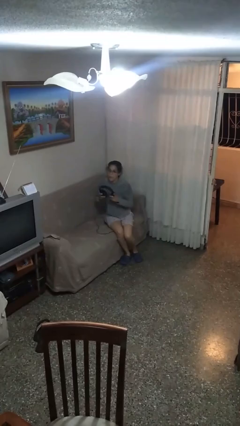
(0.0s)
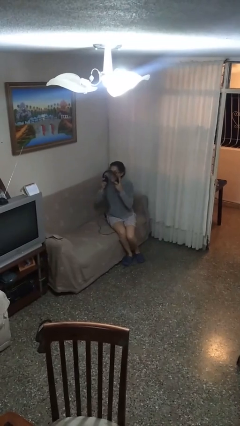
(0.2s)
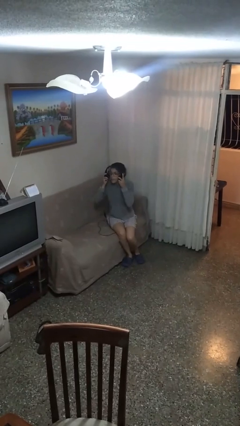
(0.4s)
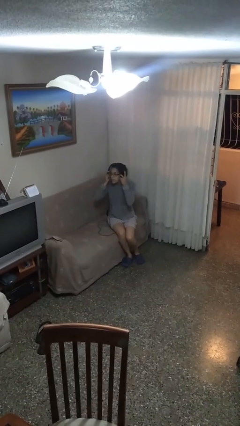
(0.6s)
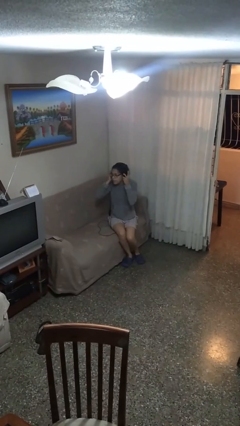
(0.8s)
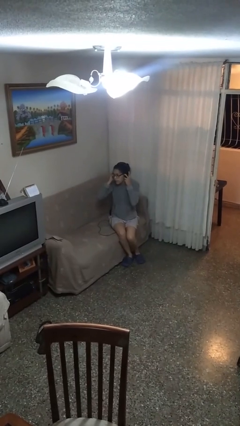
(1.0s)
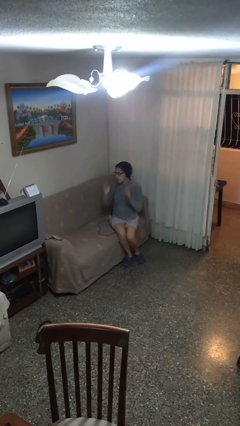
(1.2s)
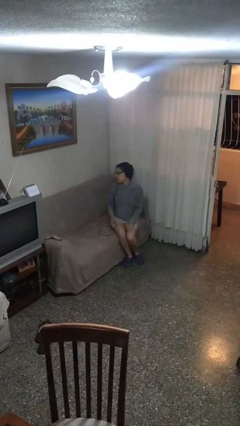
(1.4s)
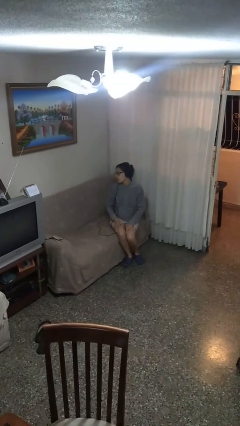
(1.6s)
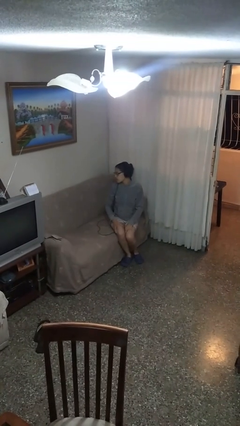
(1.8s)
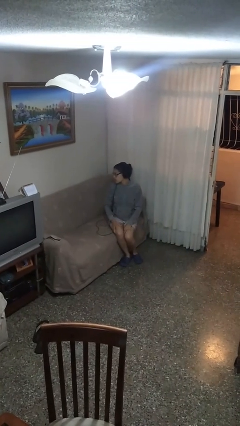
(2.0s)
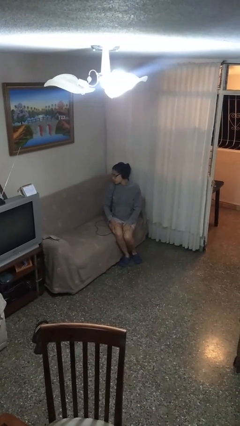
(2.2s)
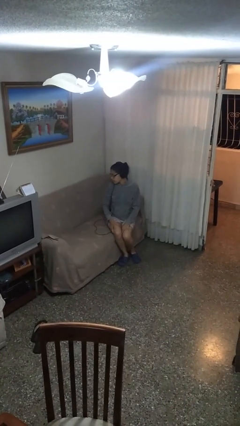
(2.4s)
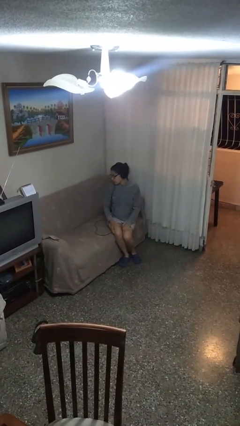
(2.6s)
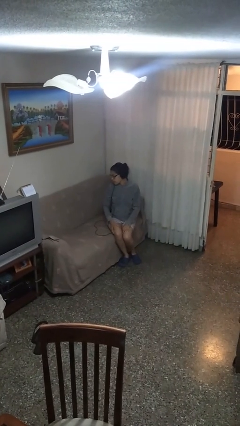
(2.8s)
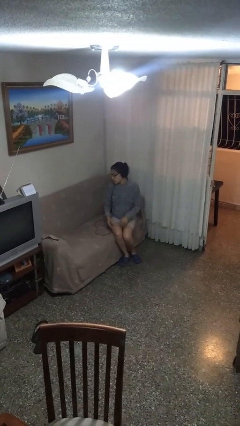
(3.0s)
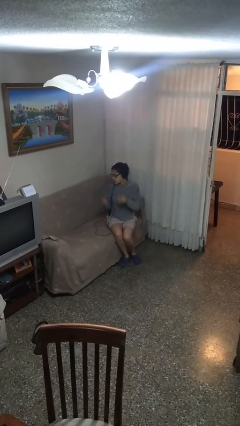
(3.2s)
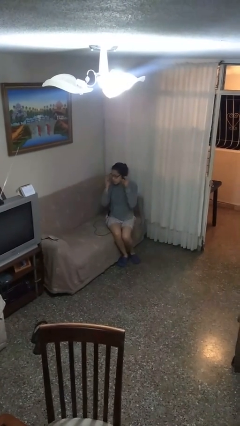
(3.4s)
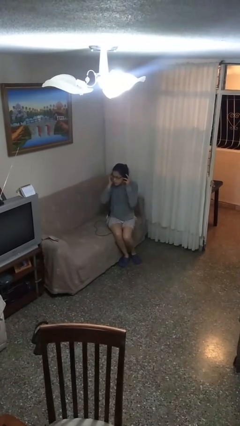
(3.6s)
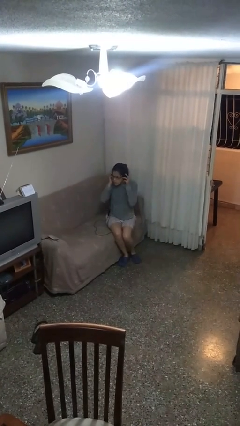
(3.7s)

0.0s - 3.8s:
person puts on headphones

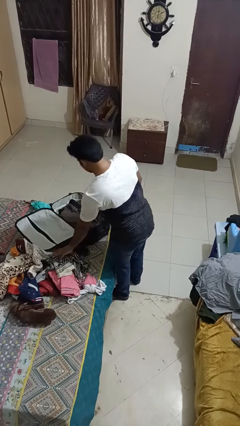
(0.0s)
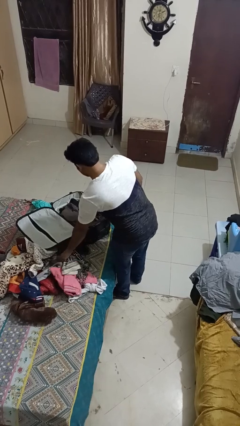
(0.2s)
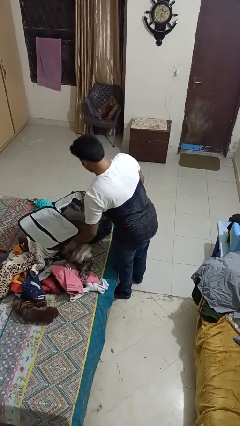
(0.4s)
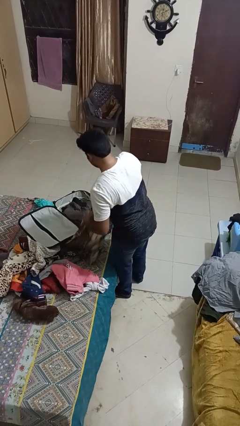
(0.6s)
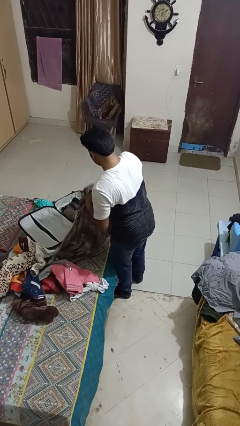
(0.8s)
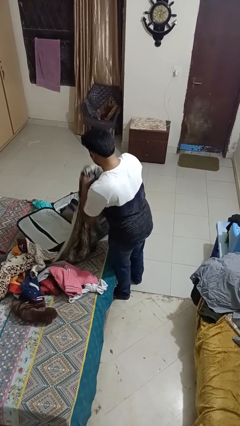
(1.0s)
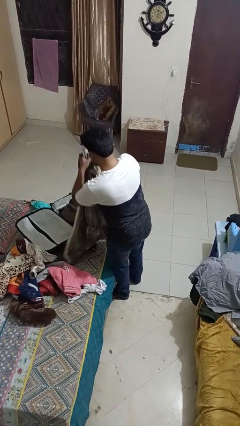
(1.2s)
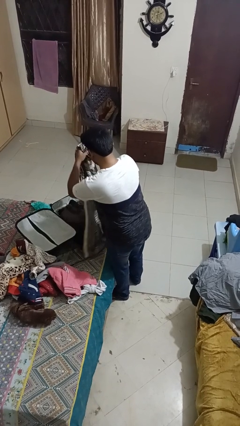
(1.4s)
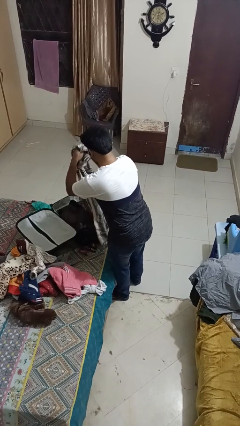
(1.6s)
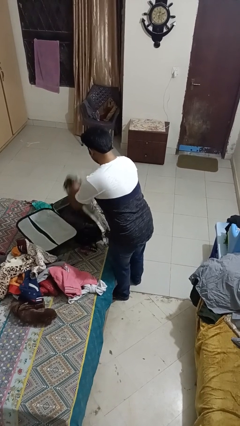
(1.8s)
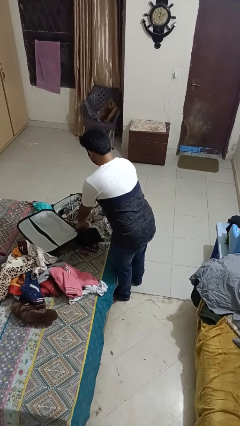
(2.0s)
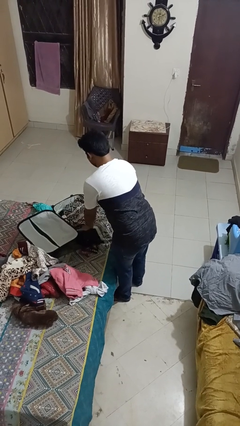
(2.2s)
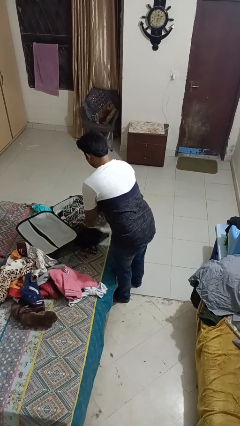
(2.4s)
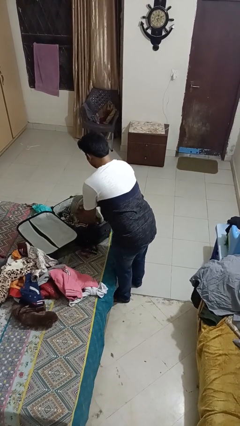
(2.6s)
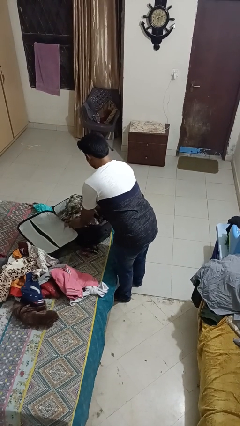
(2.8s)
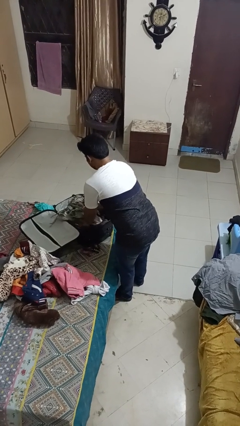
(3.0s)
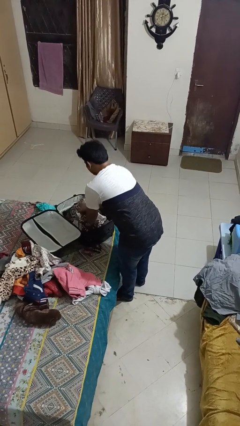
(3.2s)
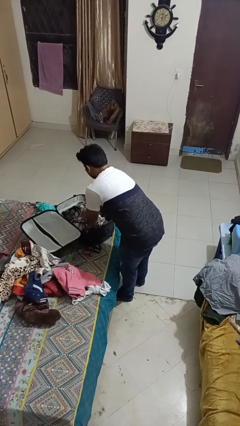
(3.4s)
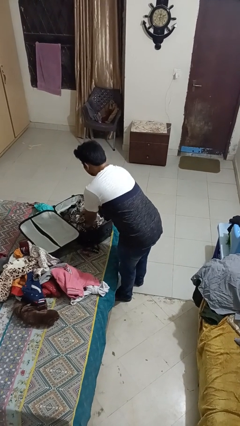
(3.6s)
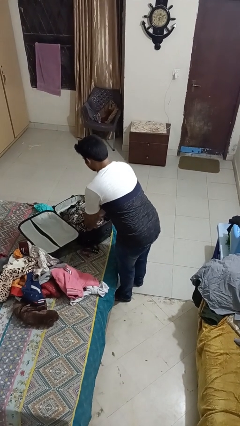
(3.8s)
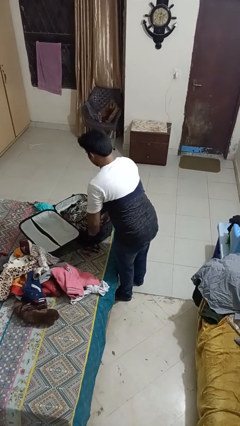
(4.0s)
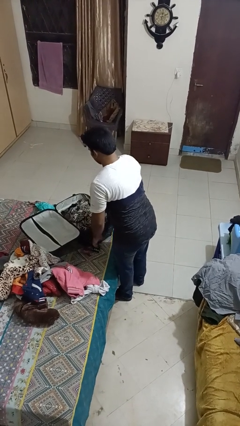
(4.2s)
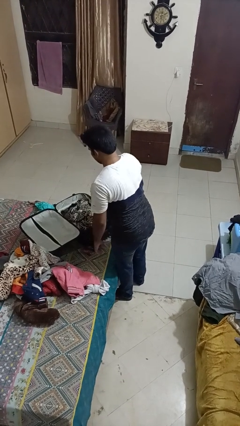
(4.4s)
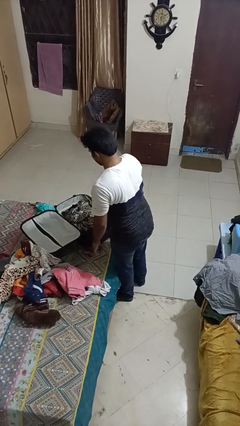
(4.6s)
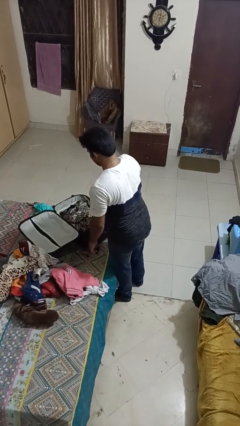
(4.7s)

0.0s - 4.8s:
person loads clothes into suitcase

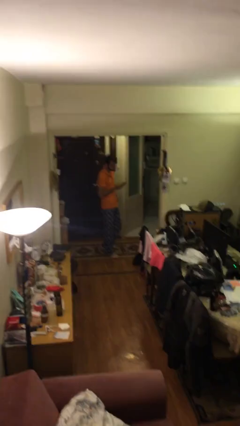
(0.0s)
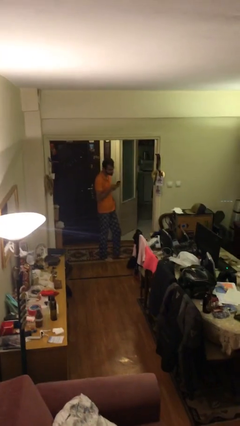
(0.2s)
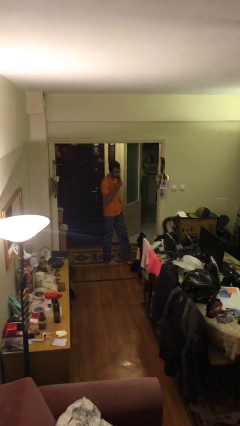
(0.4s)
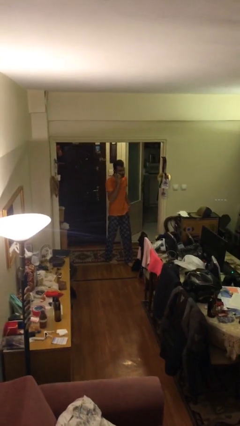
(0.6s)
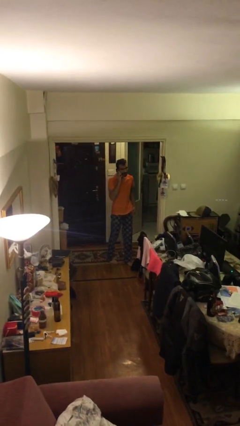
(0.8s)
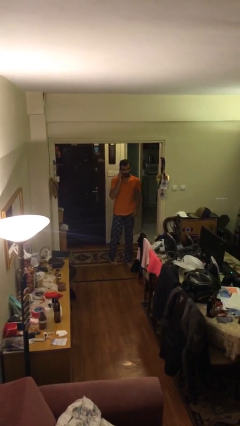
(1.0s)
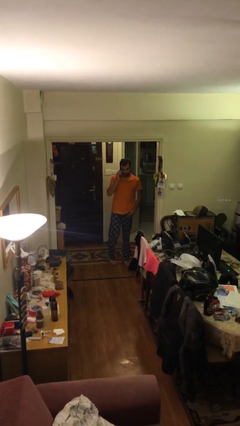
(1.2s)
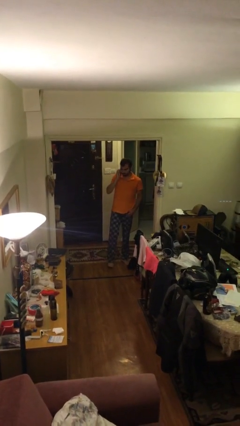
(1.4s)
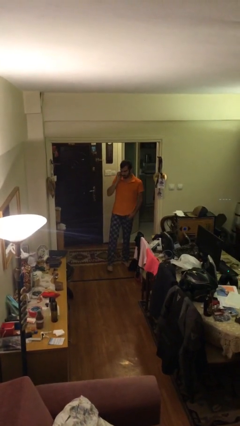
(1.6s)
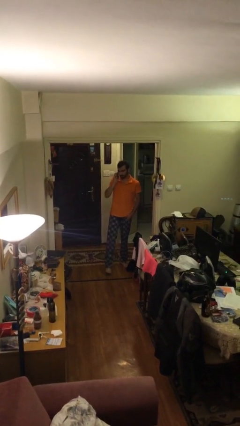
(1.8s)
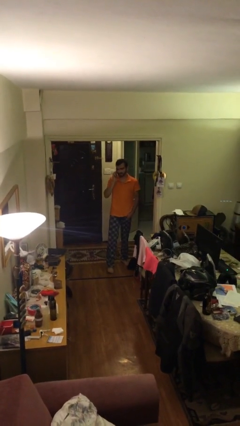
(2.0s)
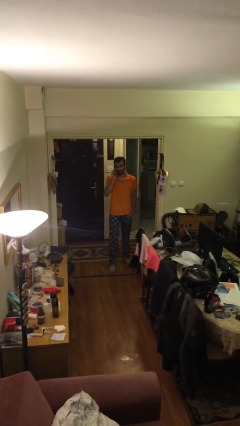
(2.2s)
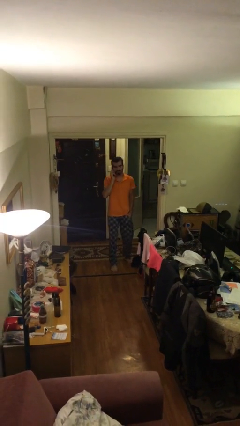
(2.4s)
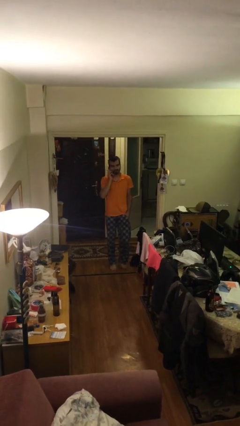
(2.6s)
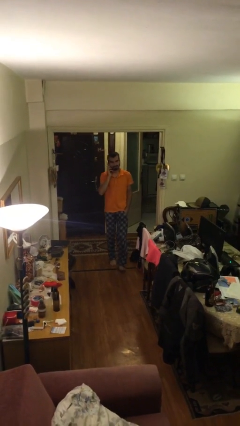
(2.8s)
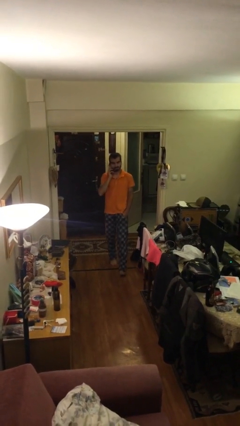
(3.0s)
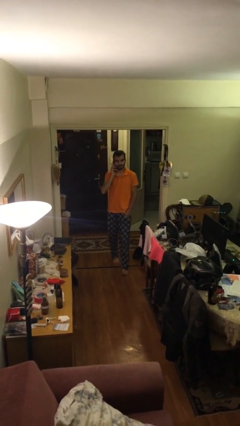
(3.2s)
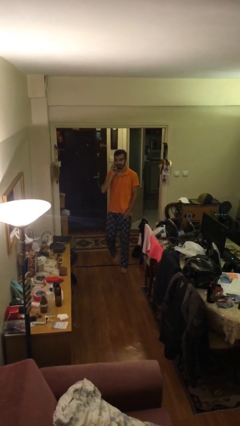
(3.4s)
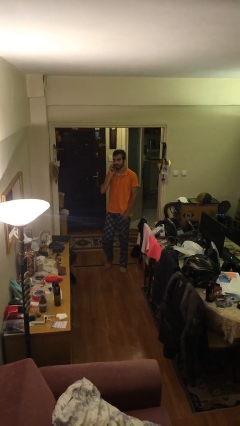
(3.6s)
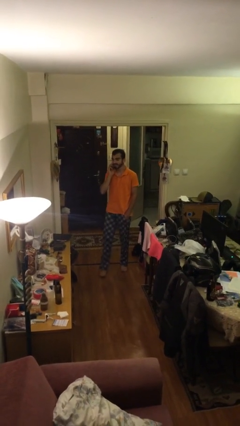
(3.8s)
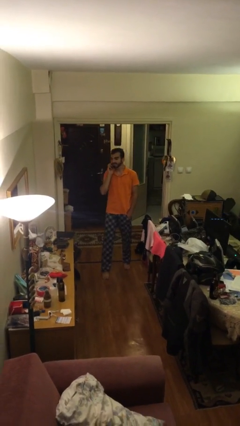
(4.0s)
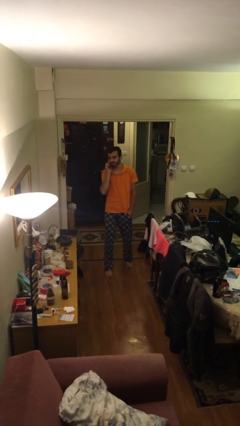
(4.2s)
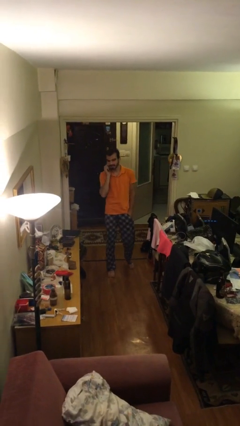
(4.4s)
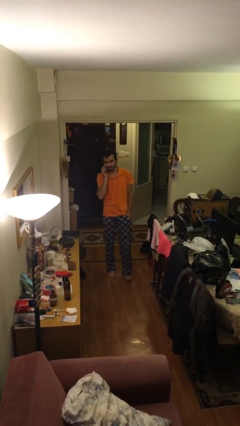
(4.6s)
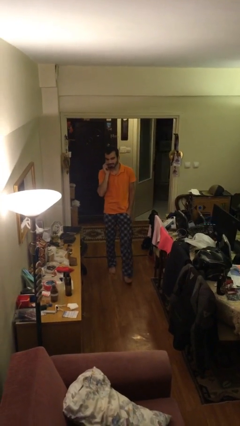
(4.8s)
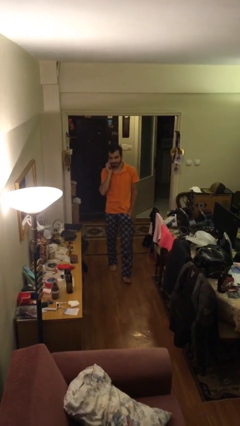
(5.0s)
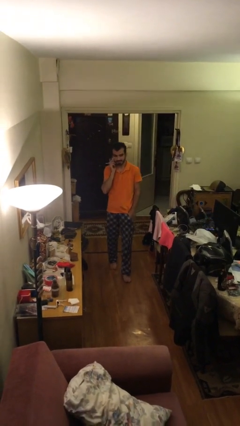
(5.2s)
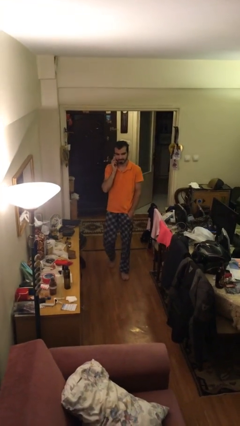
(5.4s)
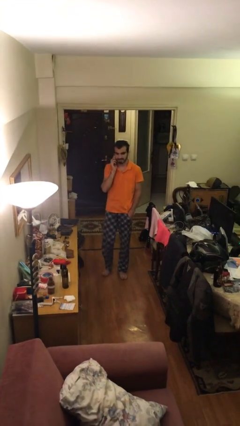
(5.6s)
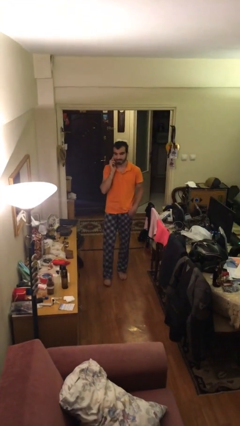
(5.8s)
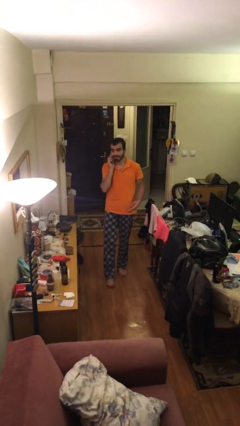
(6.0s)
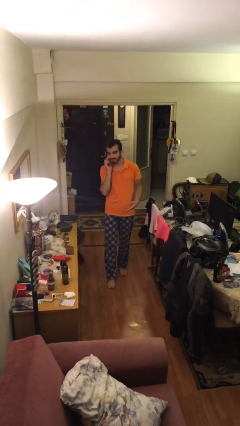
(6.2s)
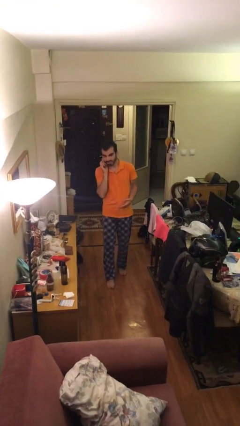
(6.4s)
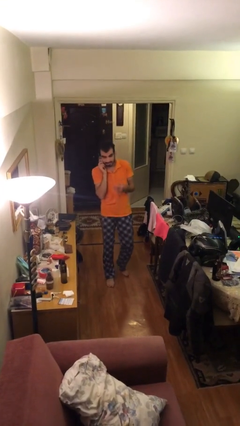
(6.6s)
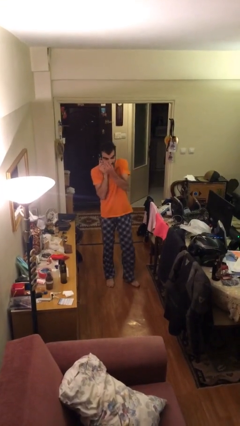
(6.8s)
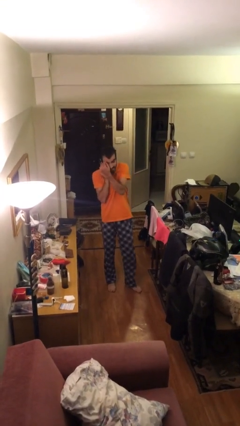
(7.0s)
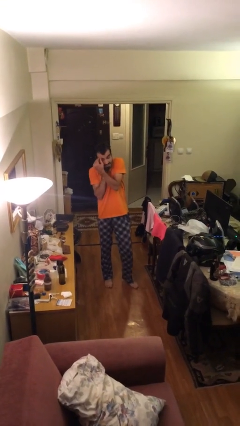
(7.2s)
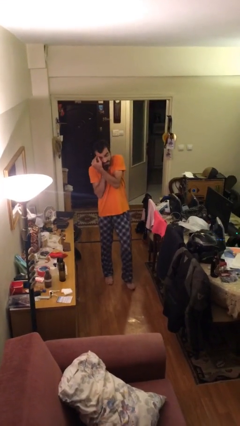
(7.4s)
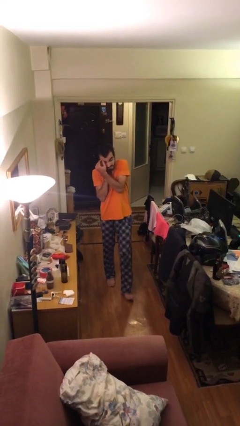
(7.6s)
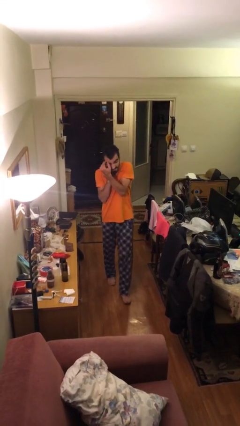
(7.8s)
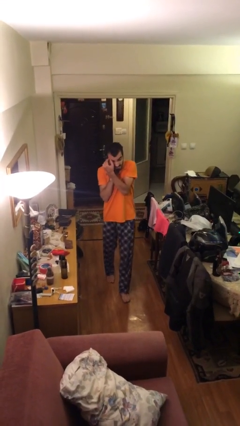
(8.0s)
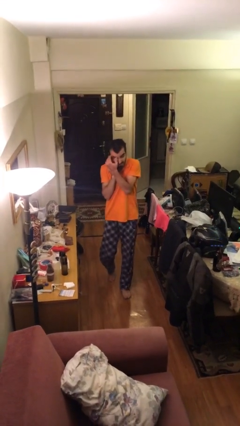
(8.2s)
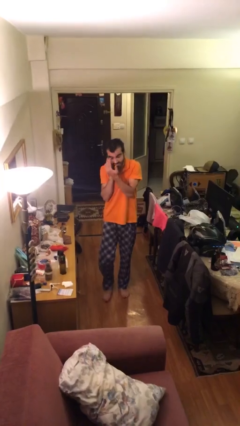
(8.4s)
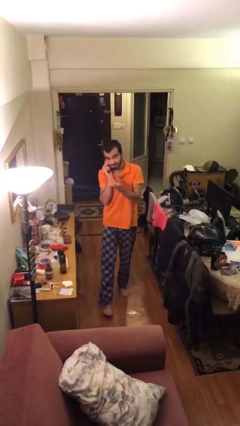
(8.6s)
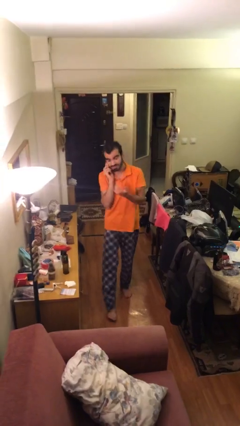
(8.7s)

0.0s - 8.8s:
person talks on phone

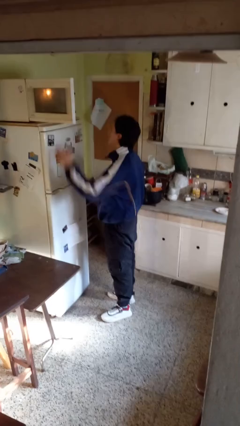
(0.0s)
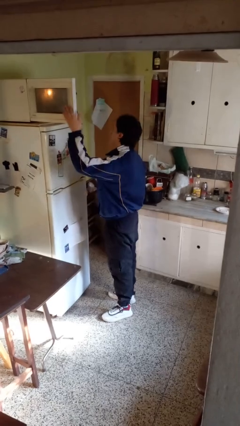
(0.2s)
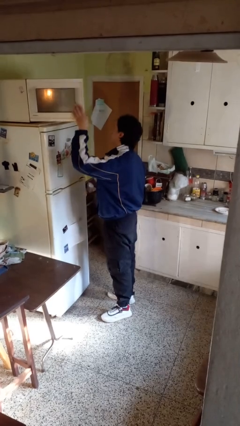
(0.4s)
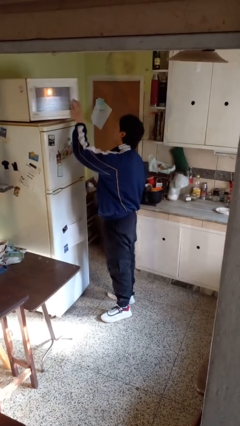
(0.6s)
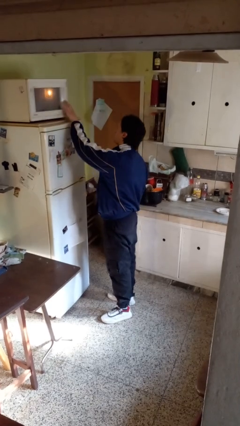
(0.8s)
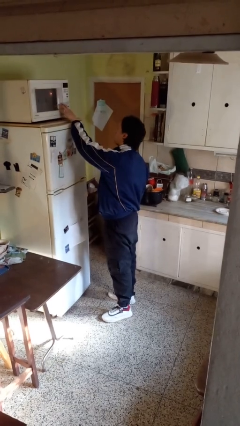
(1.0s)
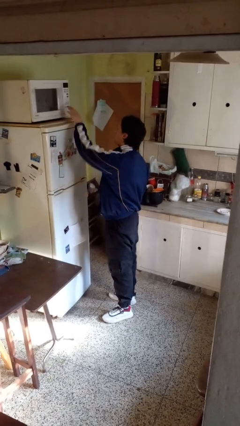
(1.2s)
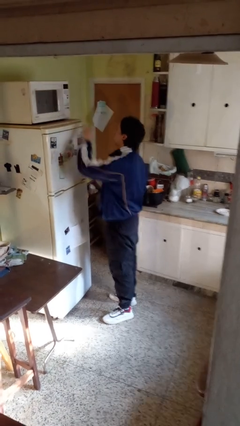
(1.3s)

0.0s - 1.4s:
person closes microwave
